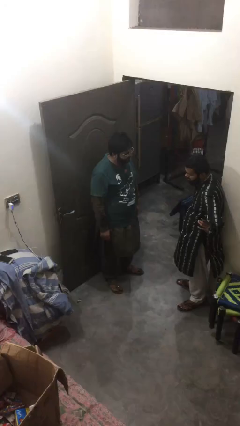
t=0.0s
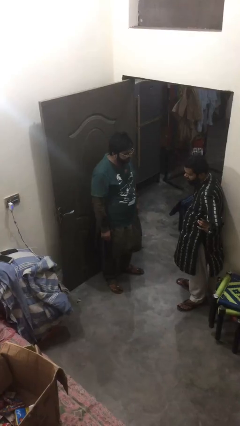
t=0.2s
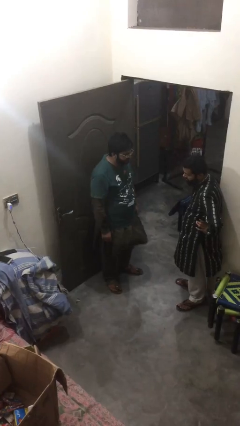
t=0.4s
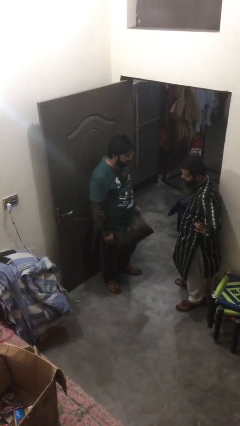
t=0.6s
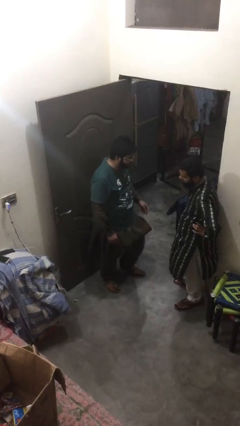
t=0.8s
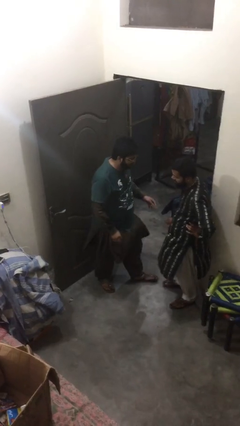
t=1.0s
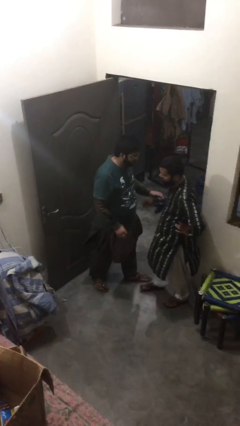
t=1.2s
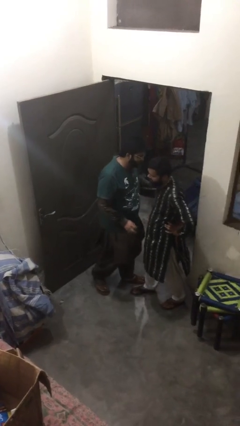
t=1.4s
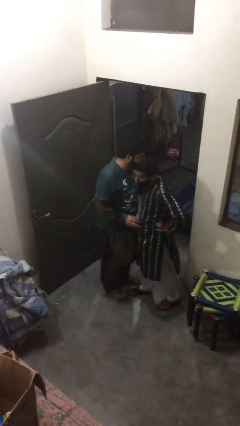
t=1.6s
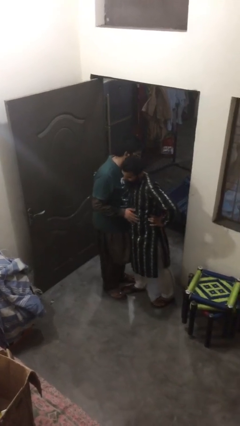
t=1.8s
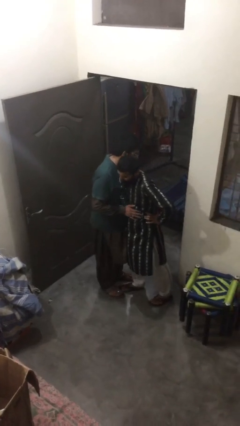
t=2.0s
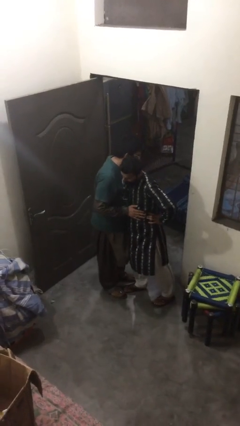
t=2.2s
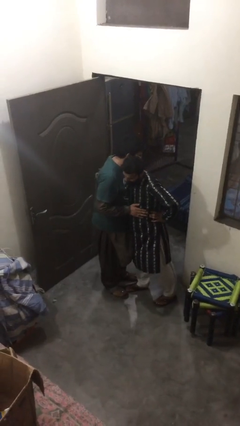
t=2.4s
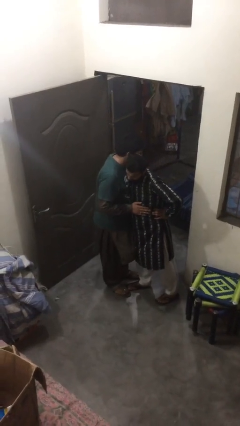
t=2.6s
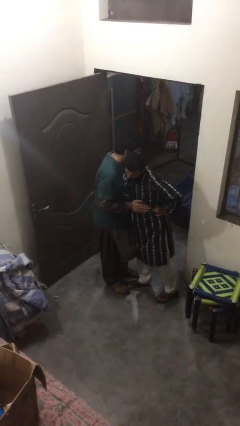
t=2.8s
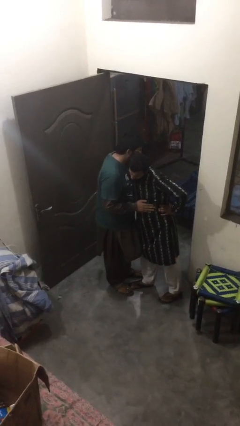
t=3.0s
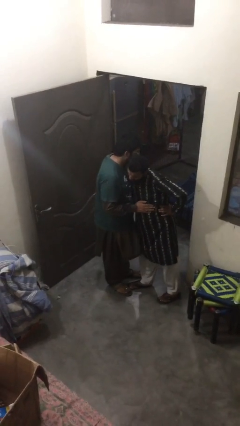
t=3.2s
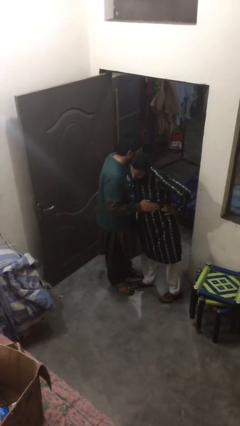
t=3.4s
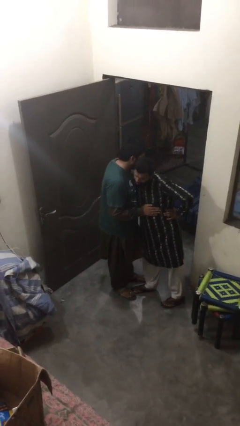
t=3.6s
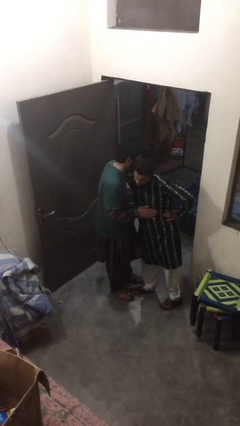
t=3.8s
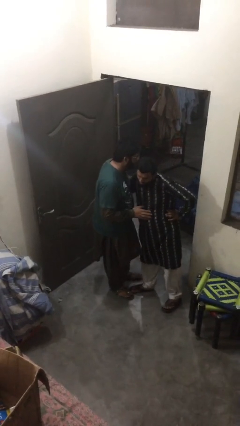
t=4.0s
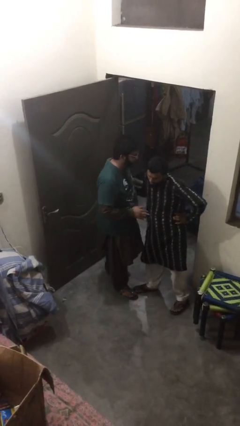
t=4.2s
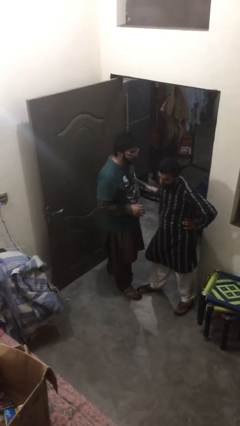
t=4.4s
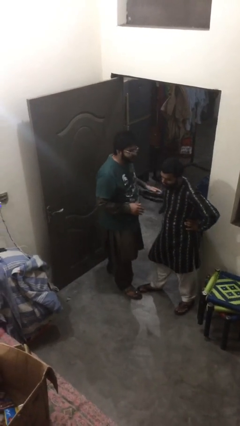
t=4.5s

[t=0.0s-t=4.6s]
person embraces person

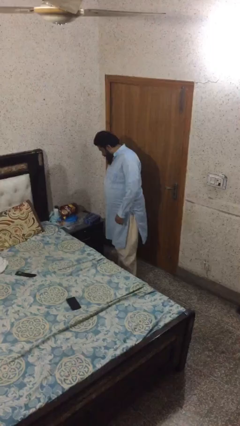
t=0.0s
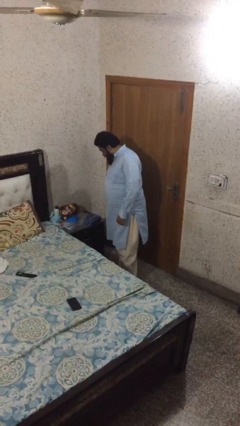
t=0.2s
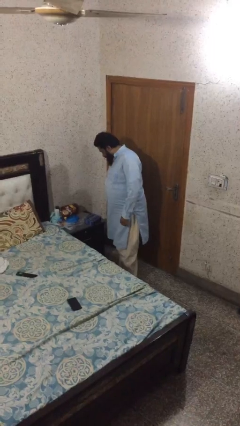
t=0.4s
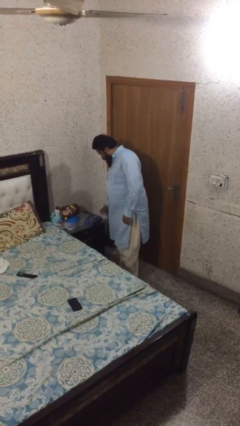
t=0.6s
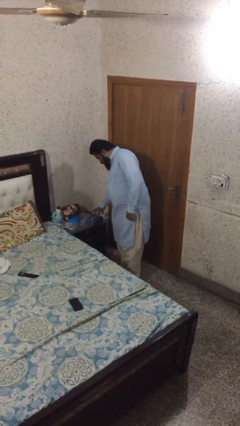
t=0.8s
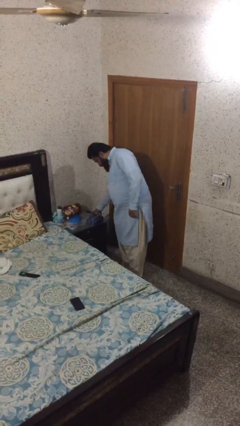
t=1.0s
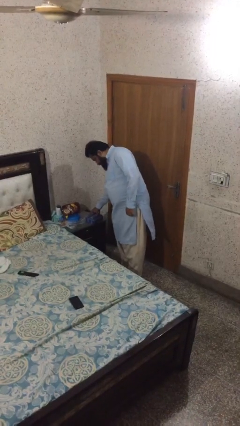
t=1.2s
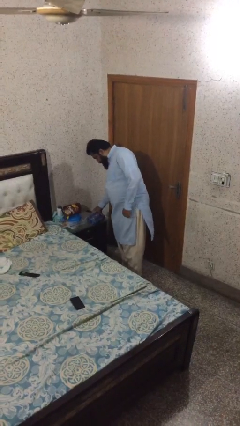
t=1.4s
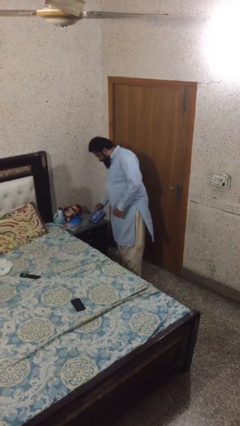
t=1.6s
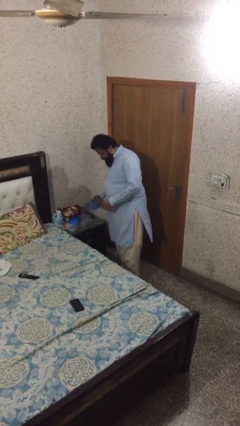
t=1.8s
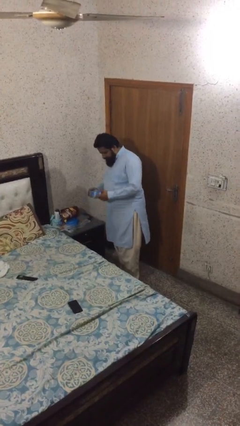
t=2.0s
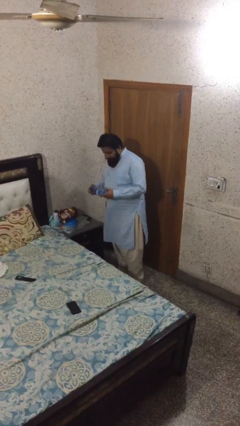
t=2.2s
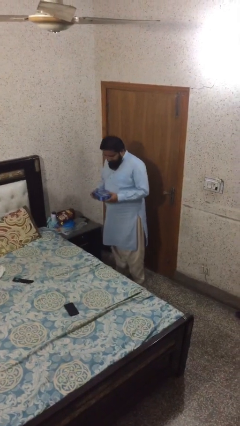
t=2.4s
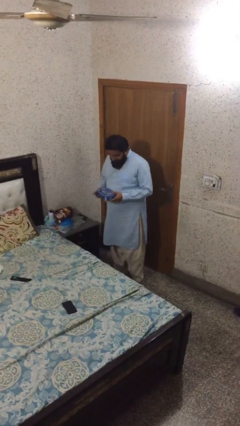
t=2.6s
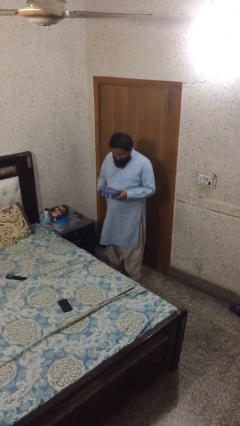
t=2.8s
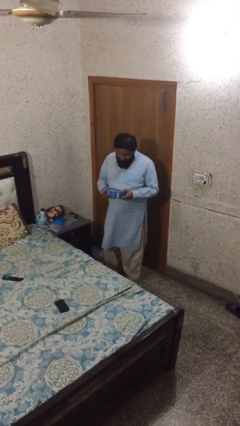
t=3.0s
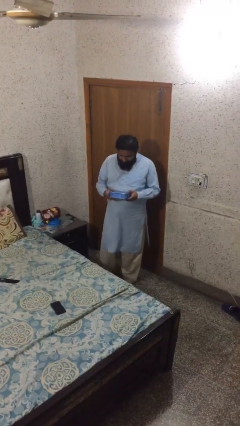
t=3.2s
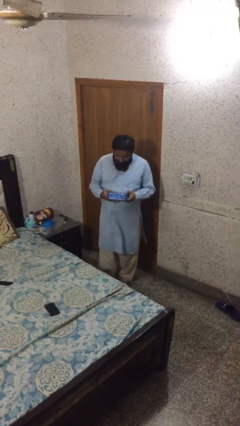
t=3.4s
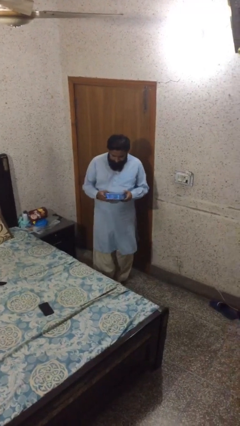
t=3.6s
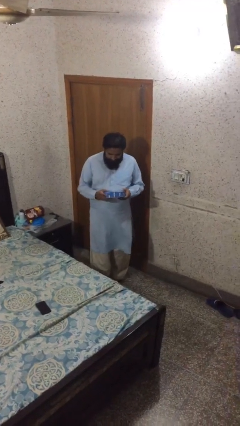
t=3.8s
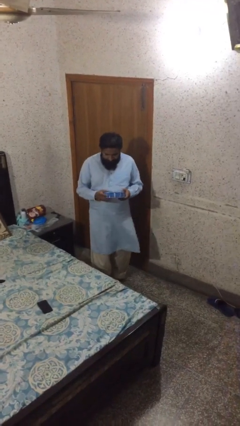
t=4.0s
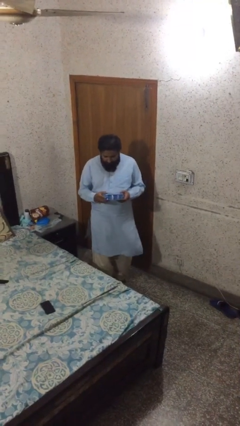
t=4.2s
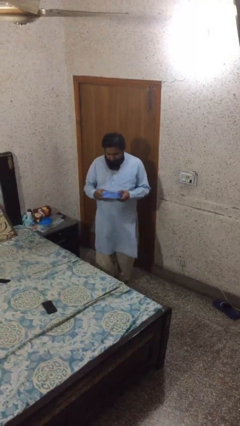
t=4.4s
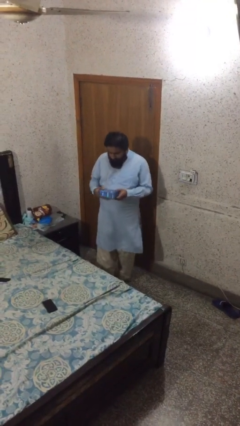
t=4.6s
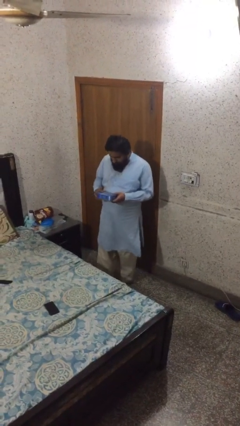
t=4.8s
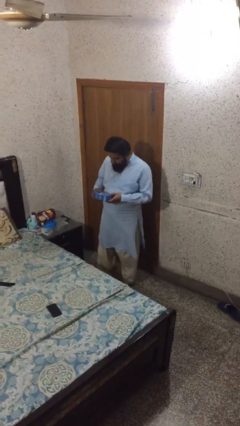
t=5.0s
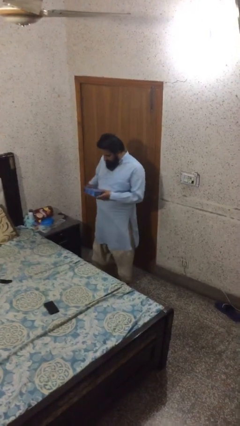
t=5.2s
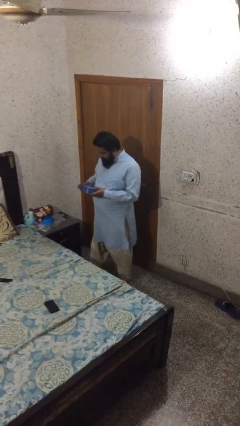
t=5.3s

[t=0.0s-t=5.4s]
person picks up object from table

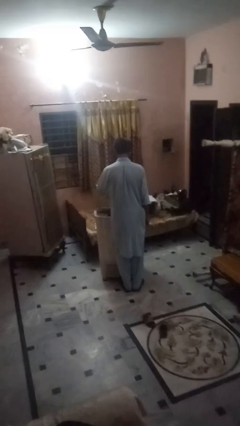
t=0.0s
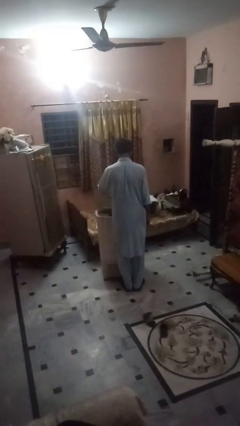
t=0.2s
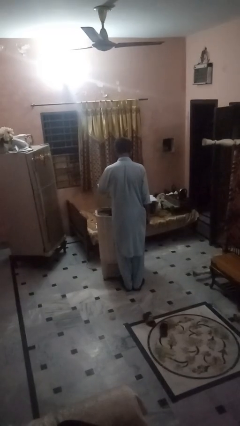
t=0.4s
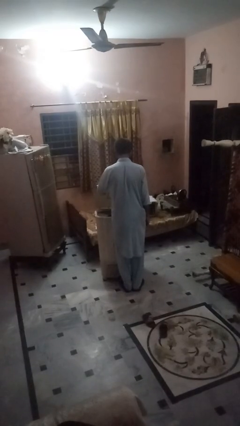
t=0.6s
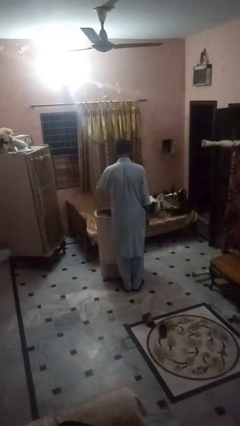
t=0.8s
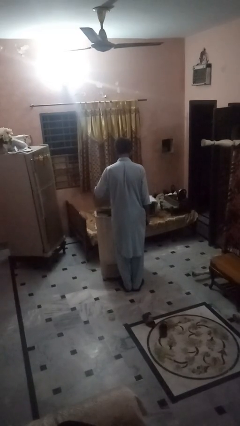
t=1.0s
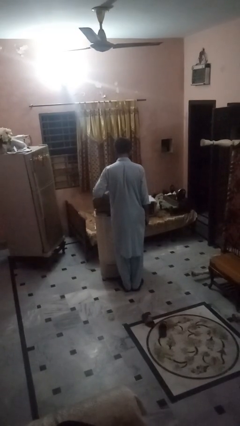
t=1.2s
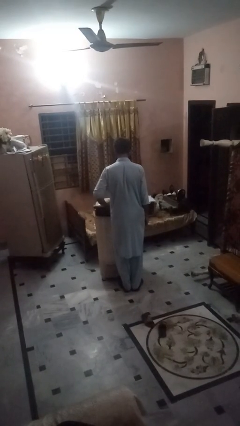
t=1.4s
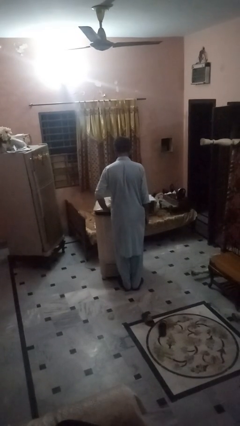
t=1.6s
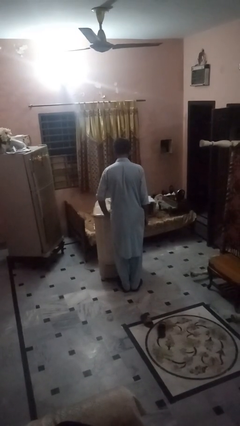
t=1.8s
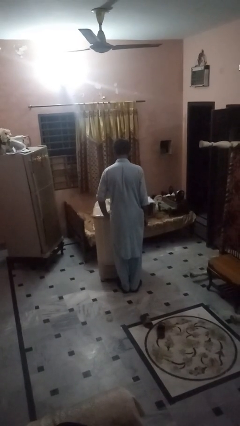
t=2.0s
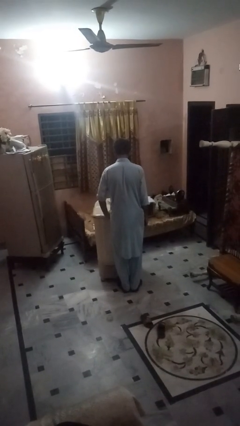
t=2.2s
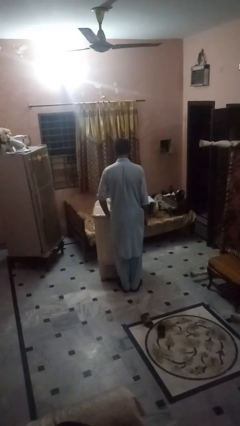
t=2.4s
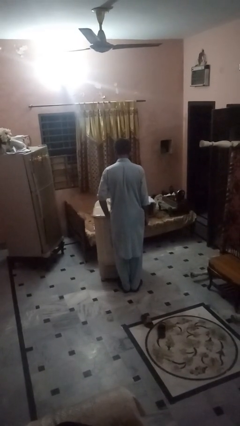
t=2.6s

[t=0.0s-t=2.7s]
person closes clothes washer

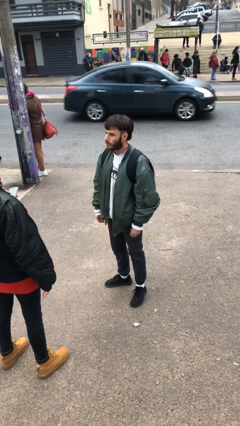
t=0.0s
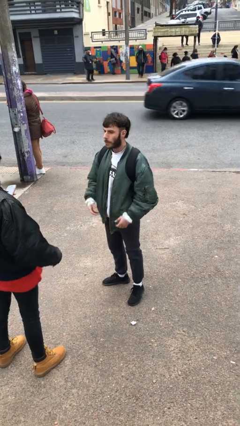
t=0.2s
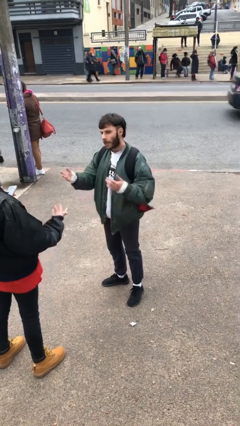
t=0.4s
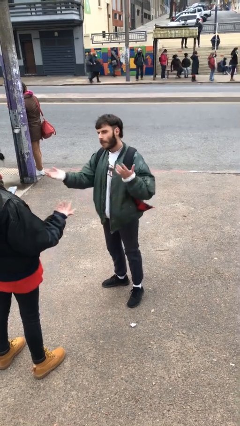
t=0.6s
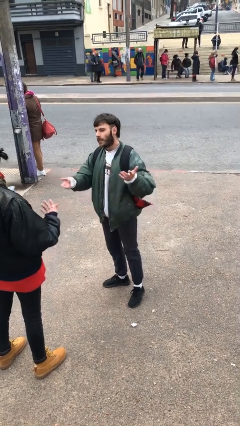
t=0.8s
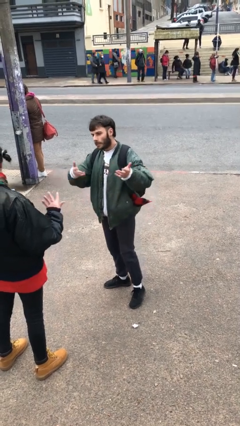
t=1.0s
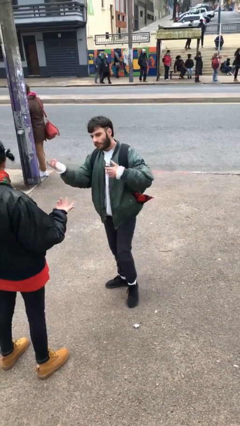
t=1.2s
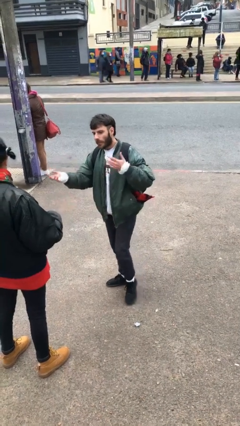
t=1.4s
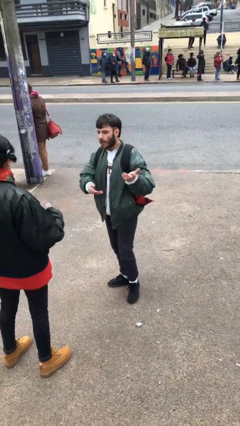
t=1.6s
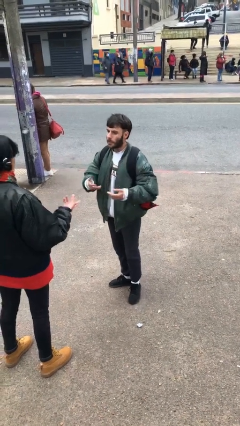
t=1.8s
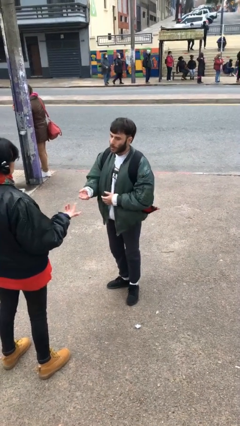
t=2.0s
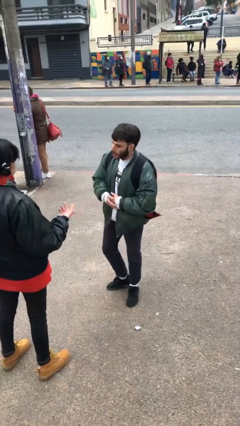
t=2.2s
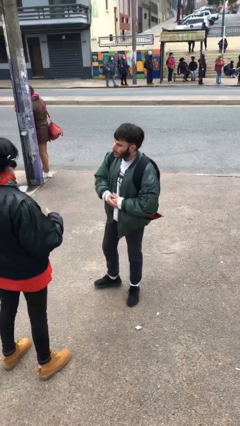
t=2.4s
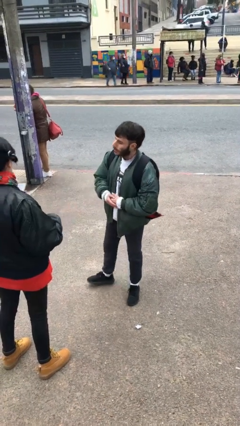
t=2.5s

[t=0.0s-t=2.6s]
person talks to person

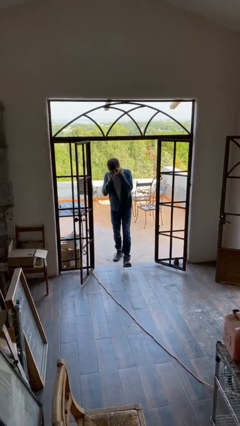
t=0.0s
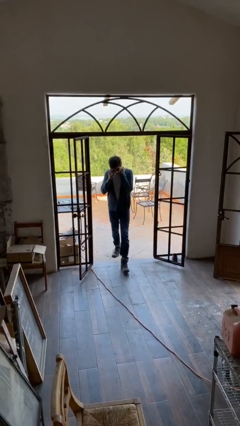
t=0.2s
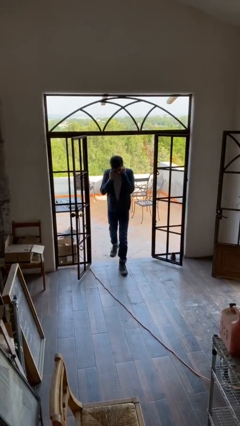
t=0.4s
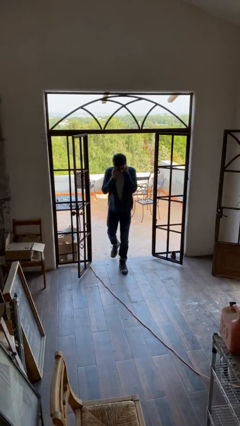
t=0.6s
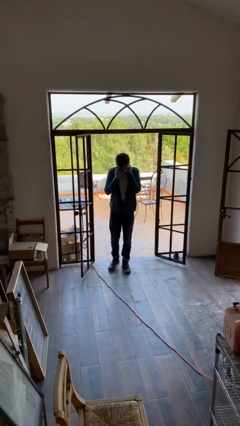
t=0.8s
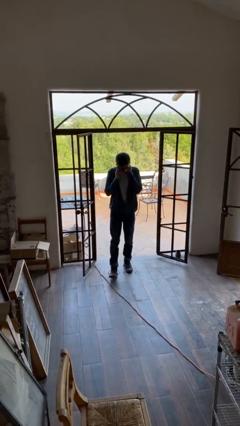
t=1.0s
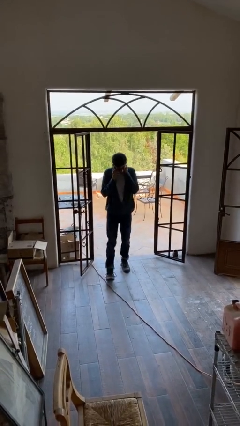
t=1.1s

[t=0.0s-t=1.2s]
person enters scene through structure

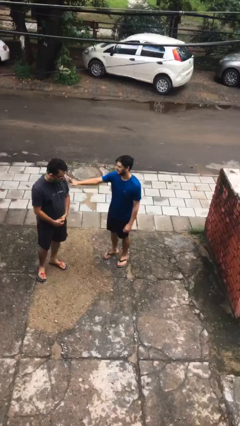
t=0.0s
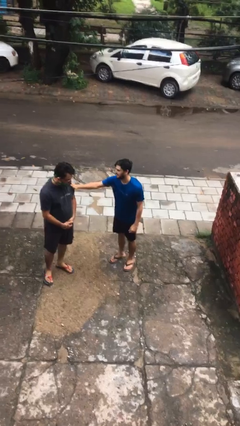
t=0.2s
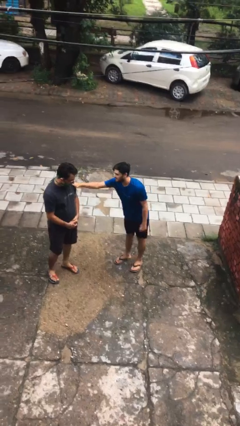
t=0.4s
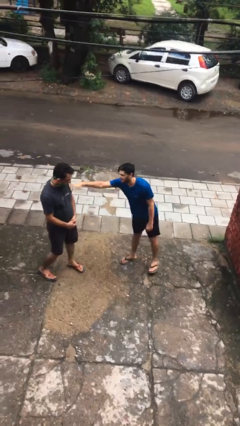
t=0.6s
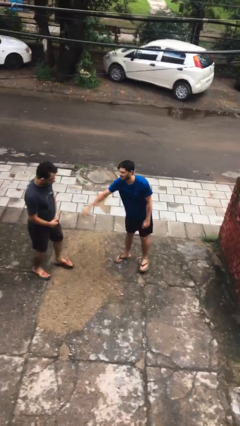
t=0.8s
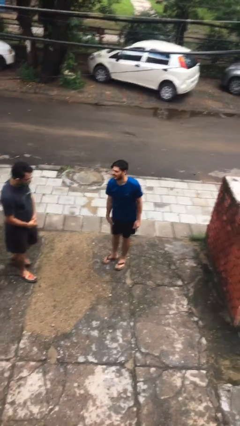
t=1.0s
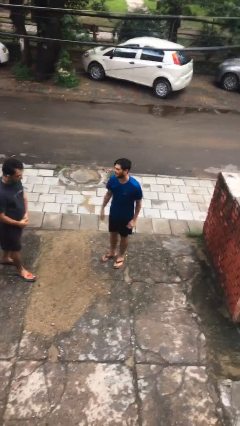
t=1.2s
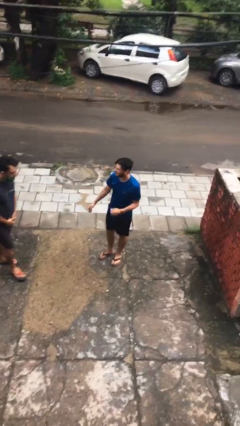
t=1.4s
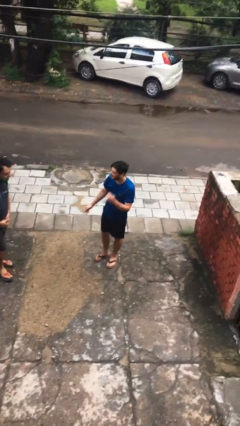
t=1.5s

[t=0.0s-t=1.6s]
person shoves person
